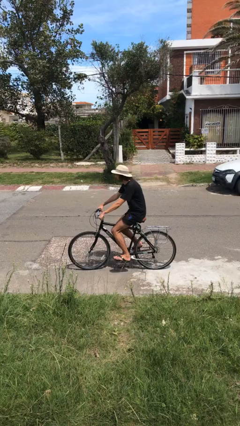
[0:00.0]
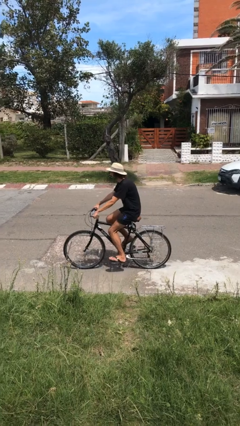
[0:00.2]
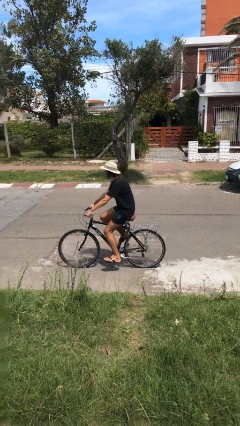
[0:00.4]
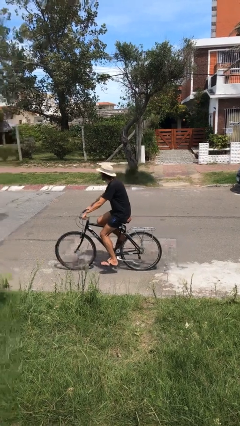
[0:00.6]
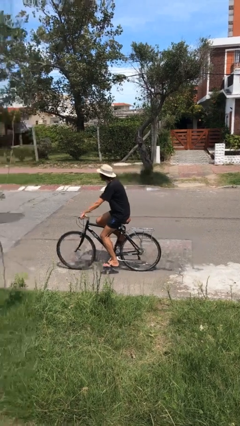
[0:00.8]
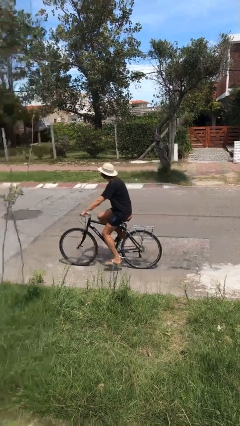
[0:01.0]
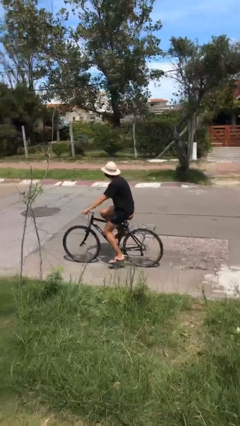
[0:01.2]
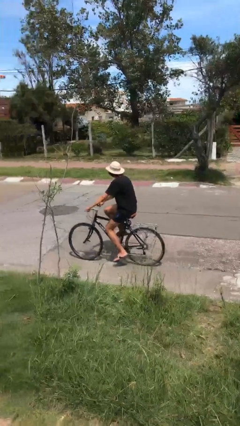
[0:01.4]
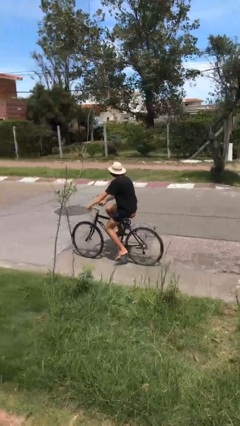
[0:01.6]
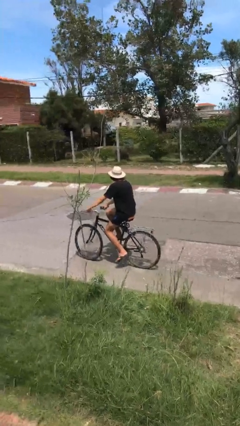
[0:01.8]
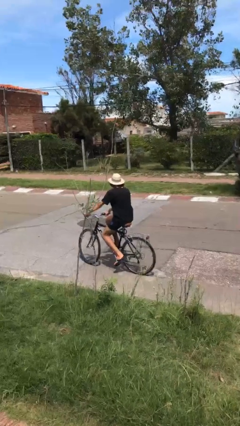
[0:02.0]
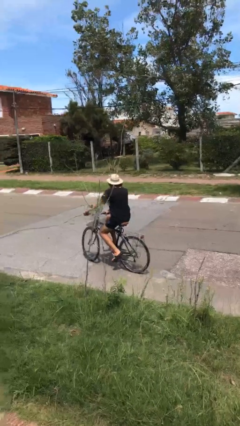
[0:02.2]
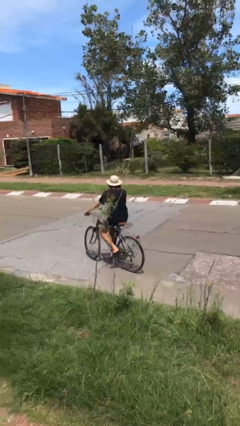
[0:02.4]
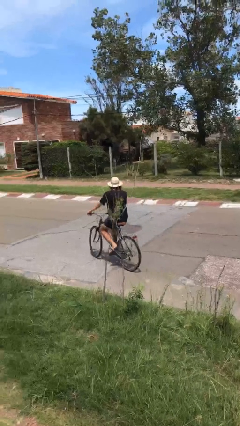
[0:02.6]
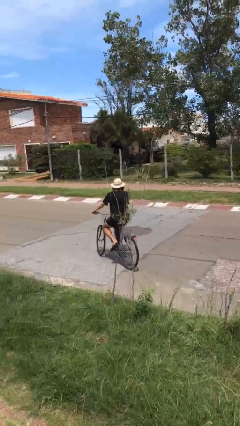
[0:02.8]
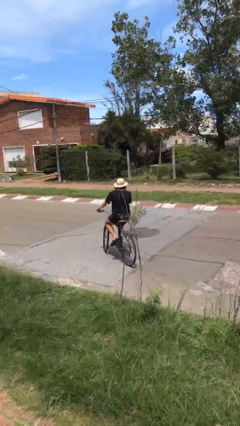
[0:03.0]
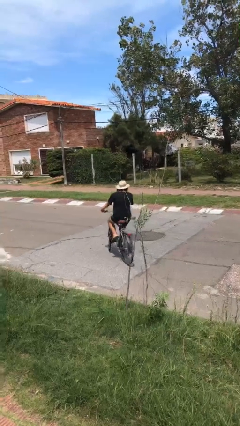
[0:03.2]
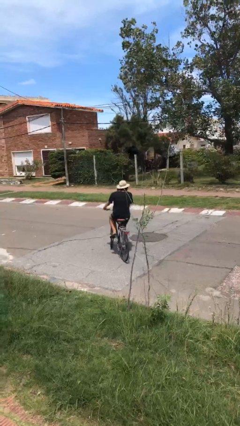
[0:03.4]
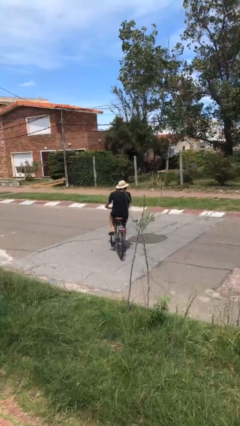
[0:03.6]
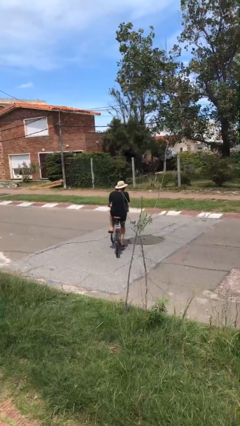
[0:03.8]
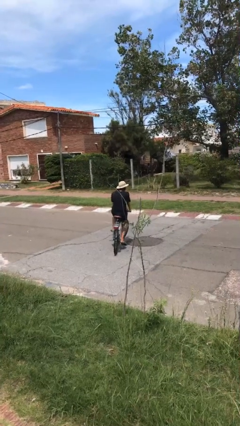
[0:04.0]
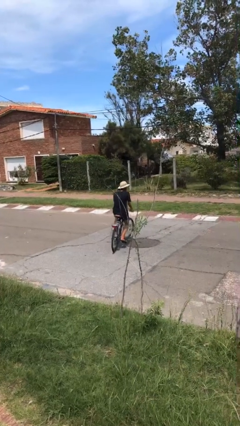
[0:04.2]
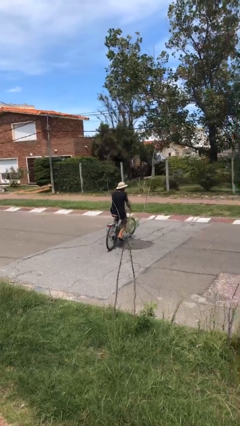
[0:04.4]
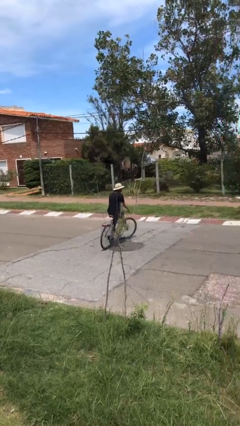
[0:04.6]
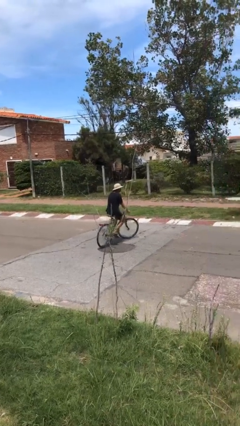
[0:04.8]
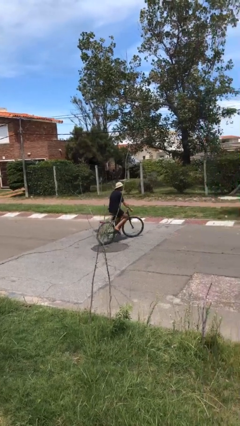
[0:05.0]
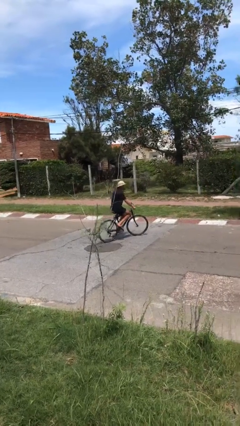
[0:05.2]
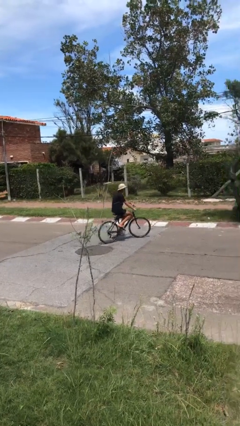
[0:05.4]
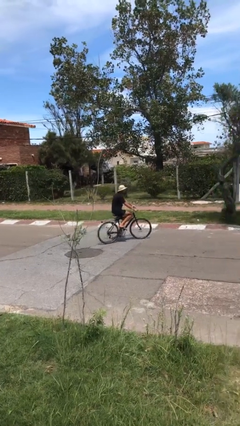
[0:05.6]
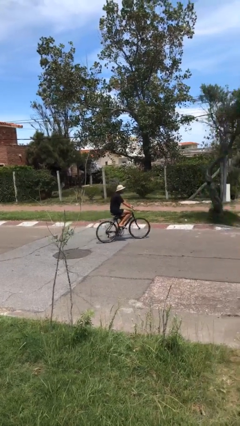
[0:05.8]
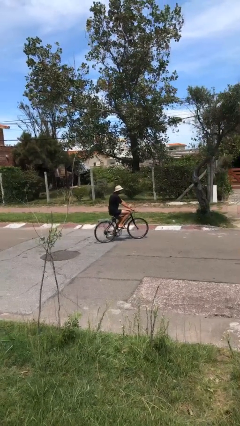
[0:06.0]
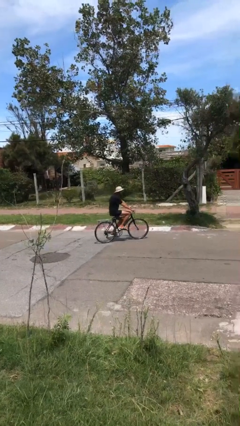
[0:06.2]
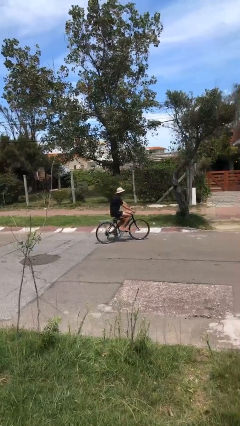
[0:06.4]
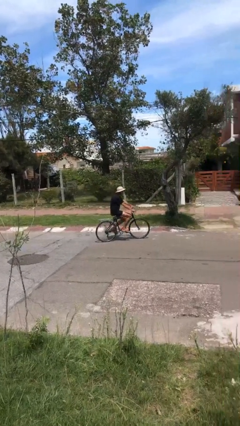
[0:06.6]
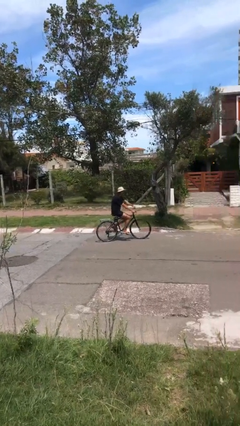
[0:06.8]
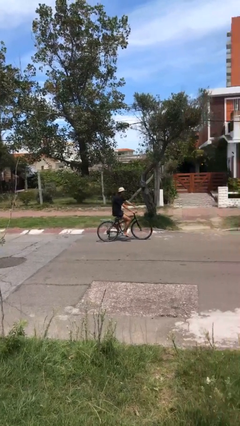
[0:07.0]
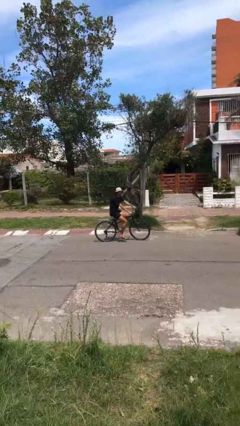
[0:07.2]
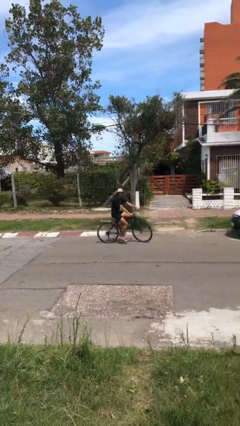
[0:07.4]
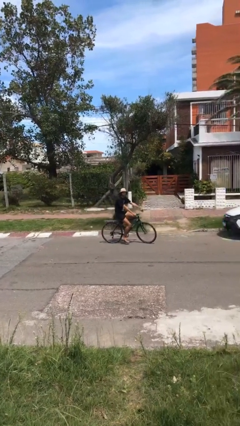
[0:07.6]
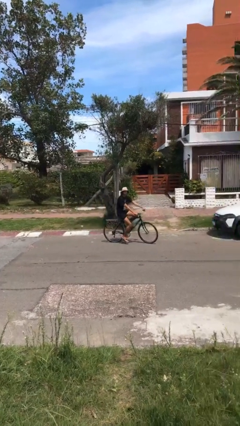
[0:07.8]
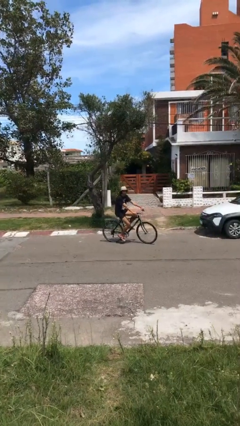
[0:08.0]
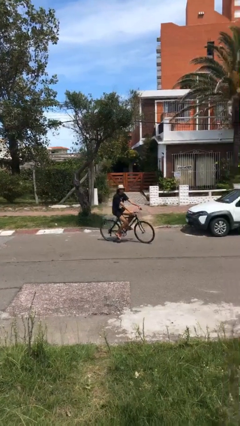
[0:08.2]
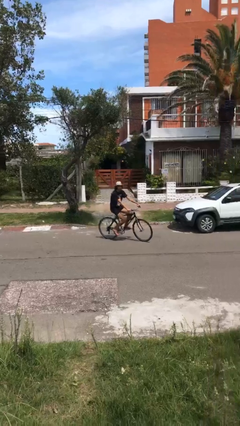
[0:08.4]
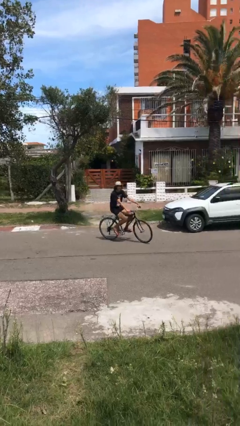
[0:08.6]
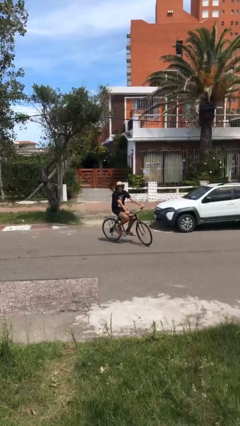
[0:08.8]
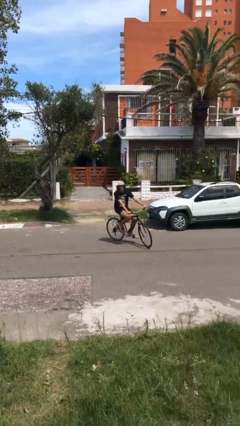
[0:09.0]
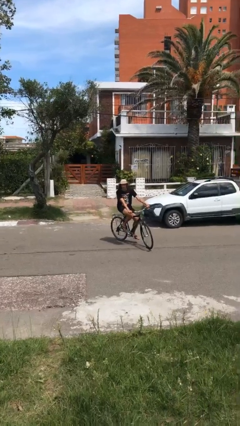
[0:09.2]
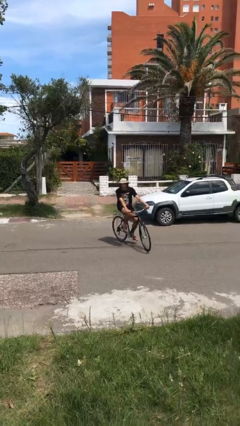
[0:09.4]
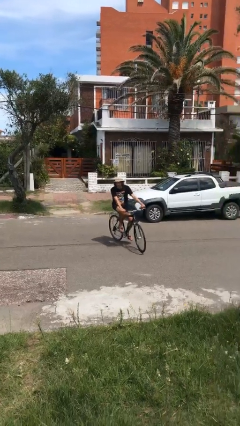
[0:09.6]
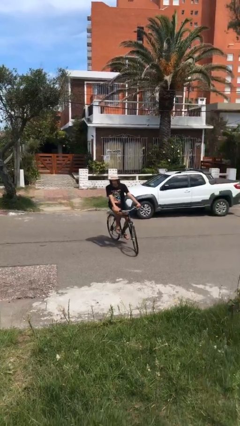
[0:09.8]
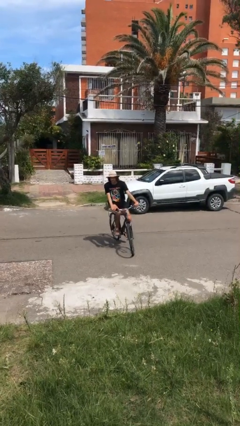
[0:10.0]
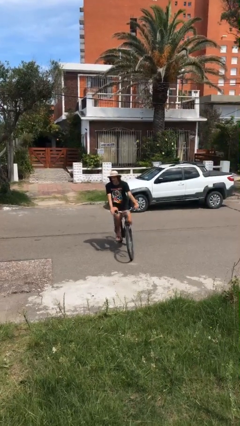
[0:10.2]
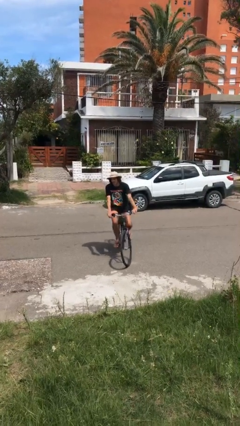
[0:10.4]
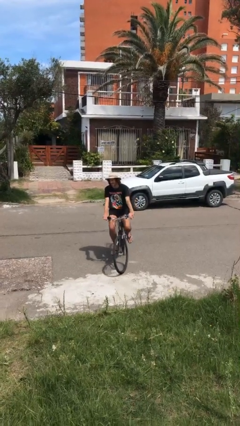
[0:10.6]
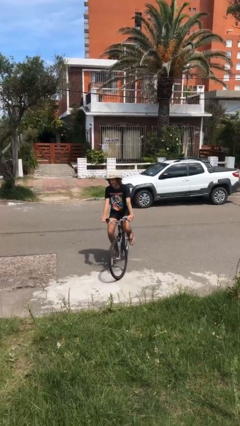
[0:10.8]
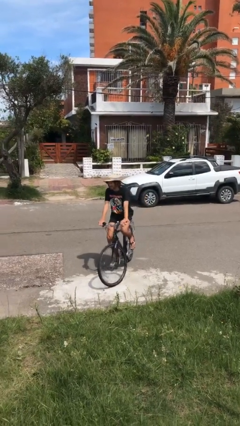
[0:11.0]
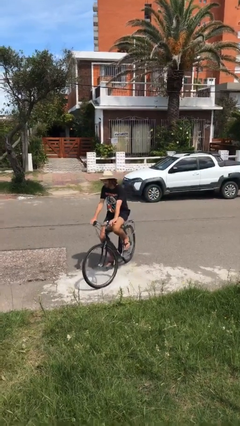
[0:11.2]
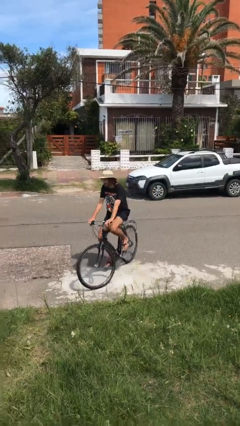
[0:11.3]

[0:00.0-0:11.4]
person rides bicycle

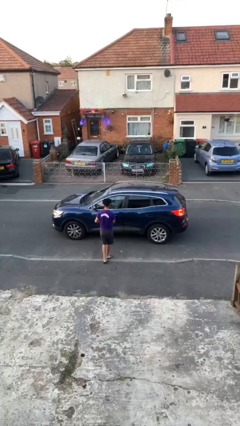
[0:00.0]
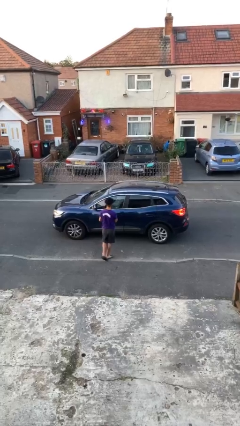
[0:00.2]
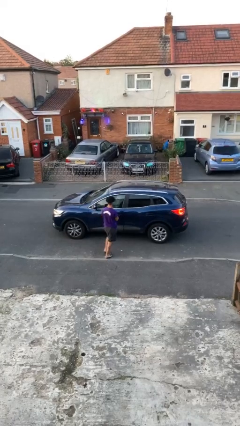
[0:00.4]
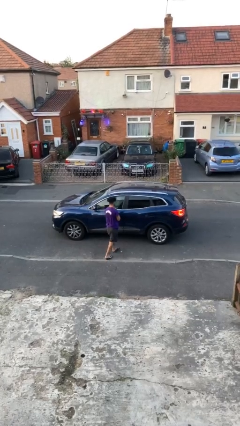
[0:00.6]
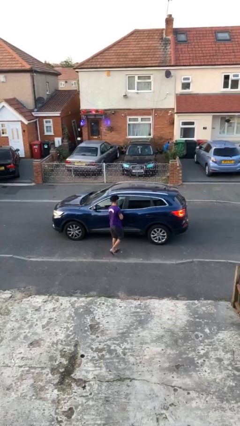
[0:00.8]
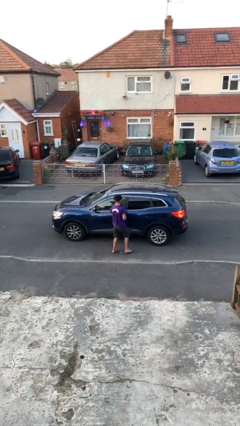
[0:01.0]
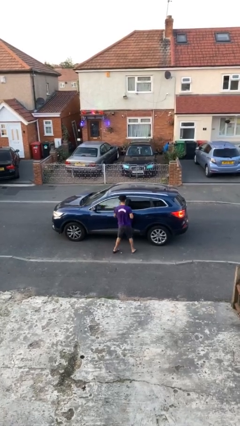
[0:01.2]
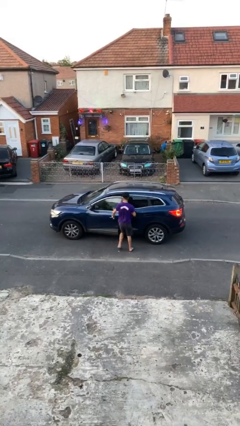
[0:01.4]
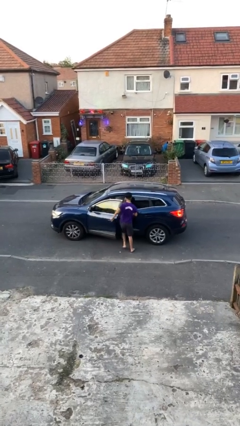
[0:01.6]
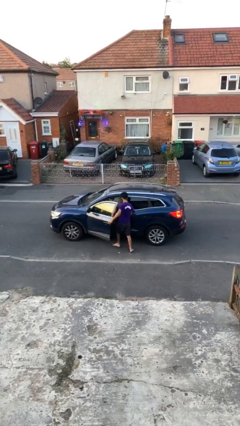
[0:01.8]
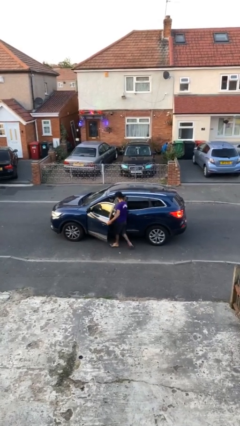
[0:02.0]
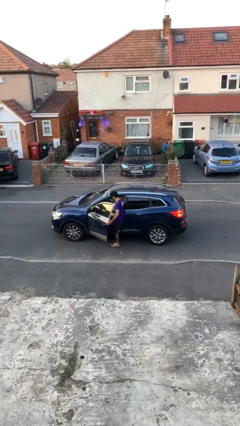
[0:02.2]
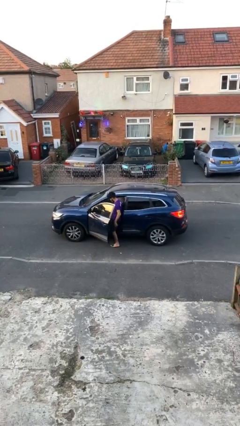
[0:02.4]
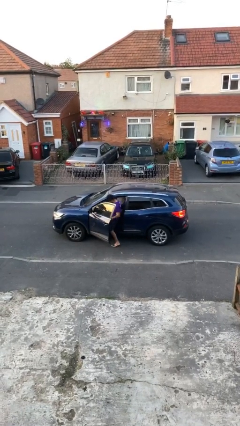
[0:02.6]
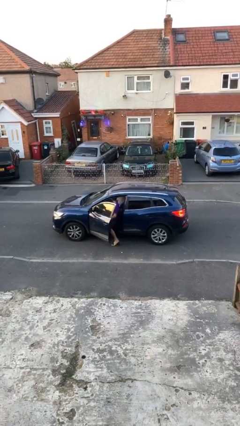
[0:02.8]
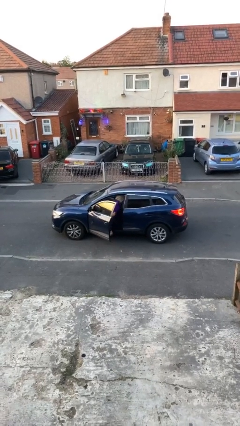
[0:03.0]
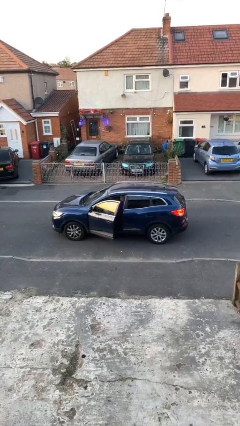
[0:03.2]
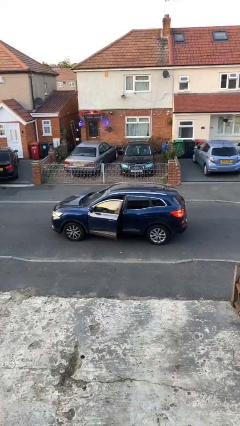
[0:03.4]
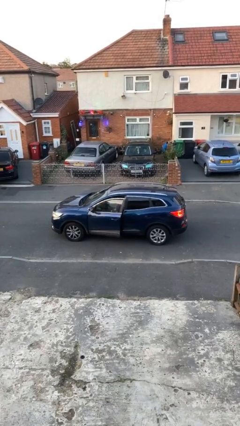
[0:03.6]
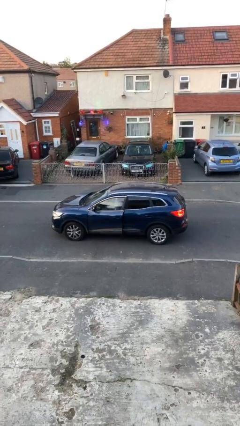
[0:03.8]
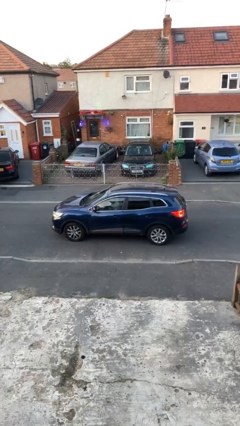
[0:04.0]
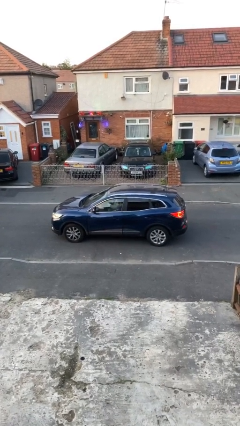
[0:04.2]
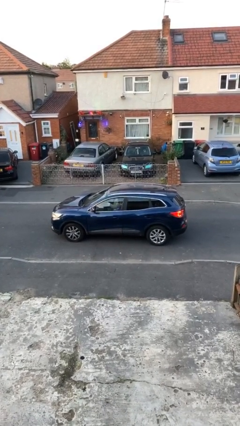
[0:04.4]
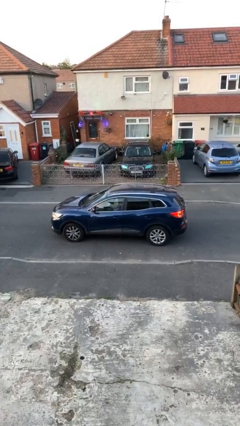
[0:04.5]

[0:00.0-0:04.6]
car picks up person

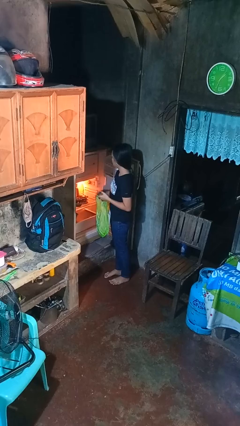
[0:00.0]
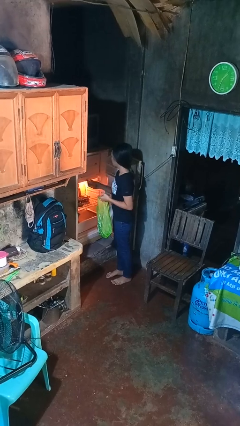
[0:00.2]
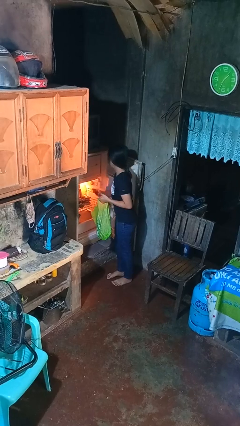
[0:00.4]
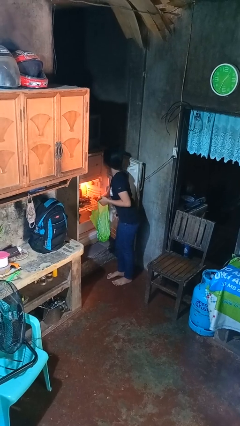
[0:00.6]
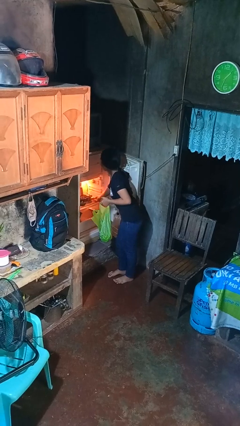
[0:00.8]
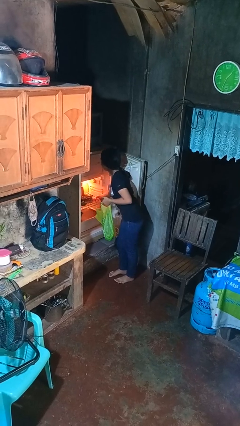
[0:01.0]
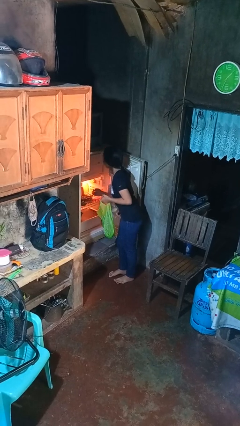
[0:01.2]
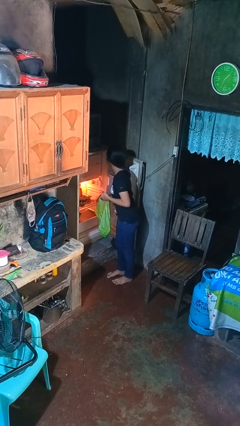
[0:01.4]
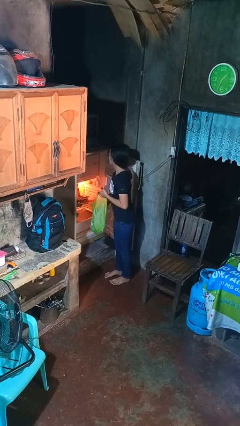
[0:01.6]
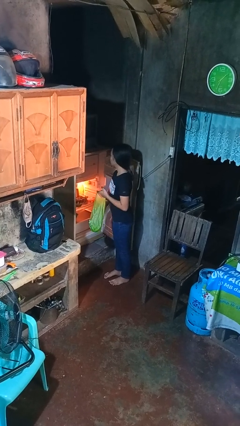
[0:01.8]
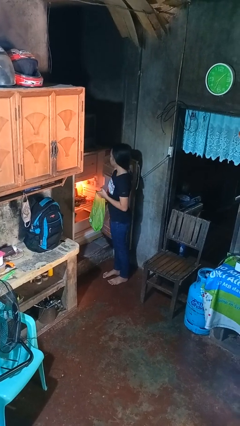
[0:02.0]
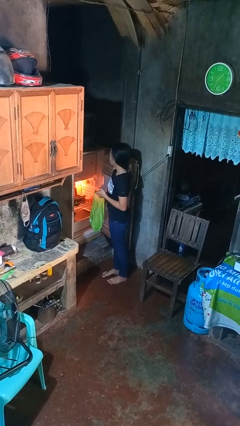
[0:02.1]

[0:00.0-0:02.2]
person loads groceries into refrigerator
